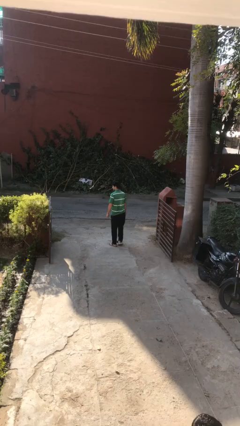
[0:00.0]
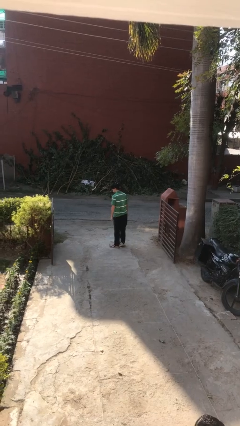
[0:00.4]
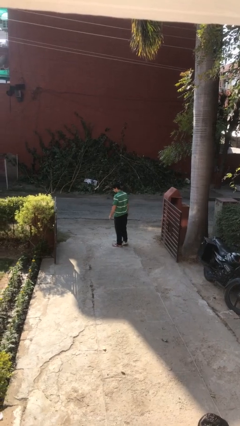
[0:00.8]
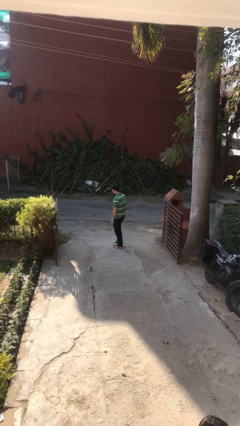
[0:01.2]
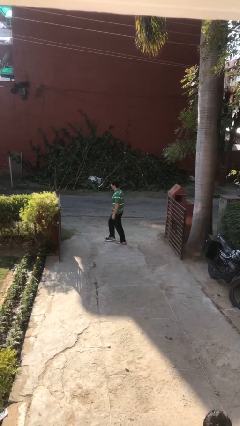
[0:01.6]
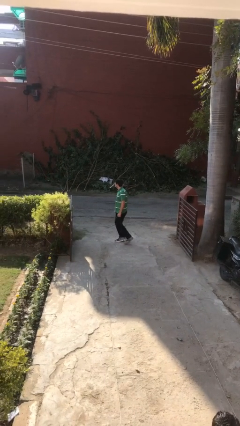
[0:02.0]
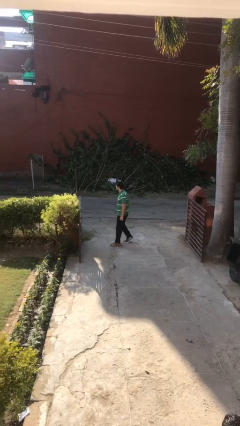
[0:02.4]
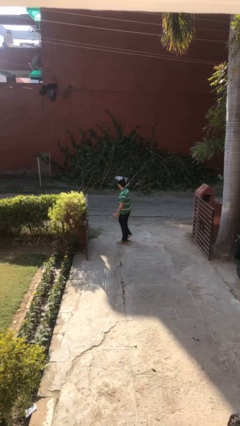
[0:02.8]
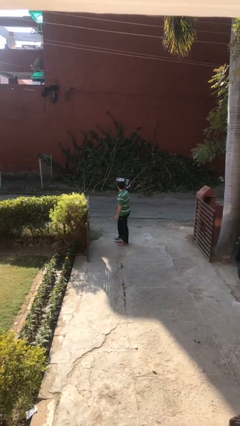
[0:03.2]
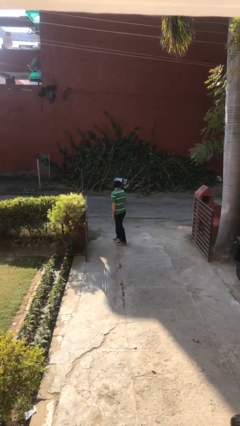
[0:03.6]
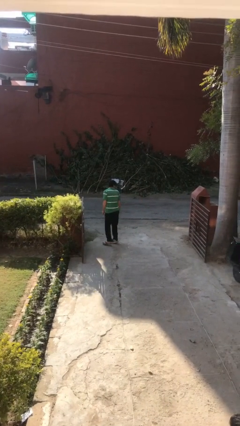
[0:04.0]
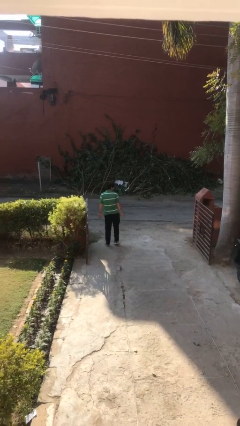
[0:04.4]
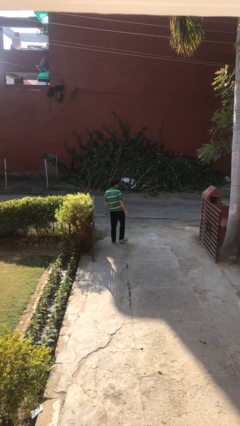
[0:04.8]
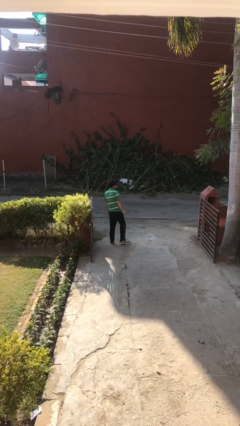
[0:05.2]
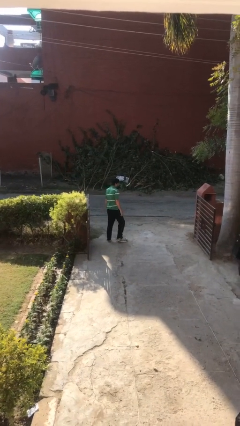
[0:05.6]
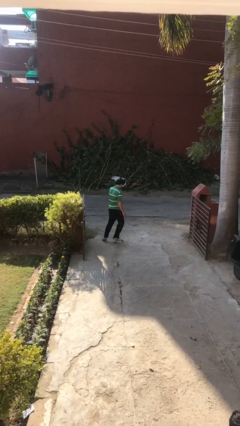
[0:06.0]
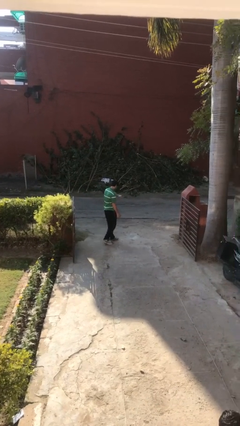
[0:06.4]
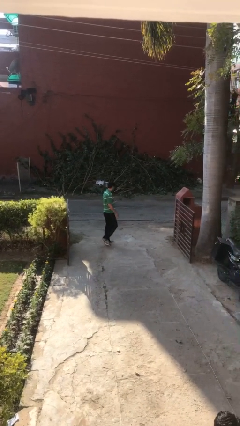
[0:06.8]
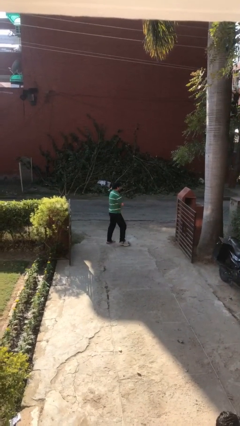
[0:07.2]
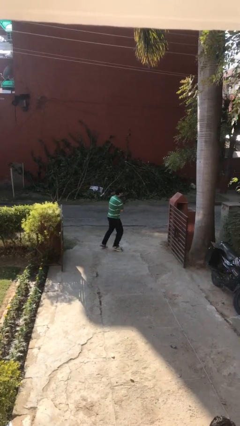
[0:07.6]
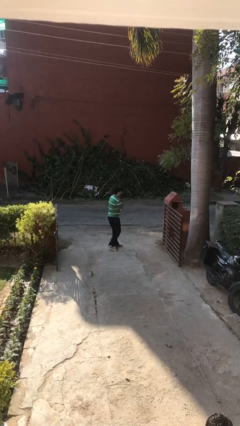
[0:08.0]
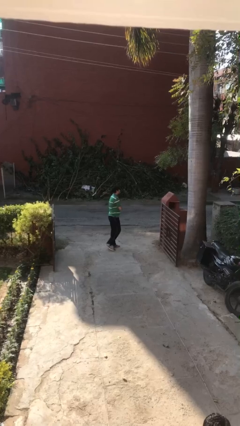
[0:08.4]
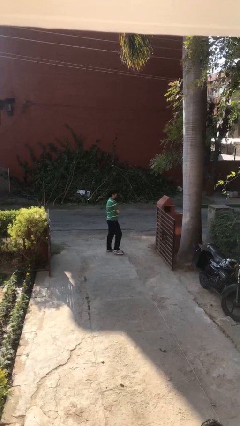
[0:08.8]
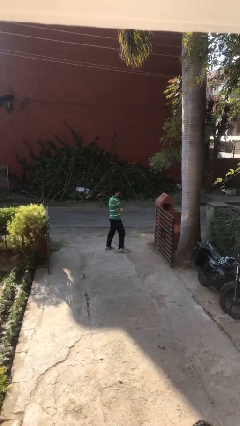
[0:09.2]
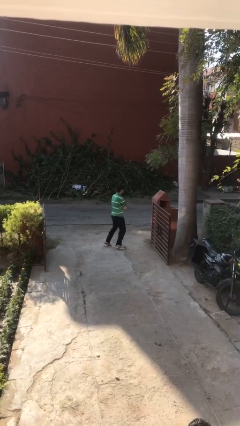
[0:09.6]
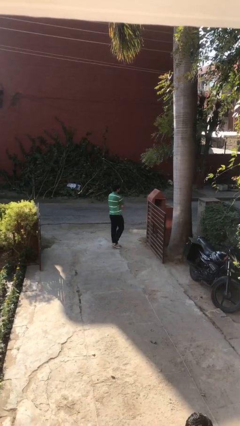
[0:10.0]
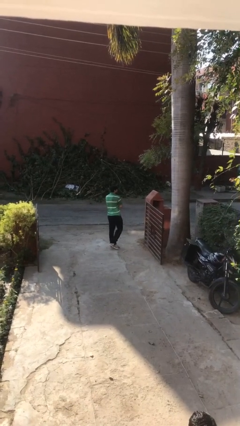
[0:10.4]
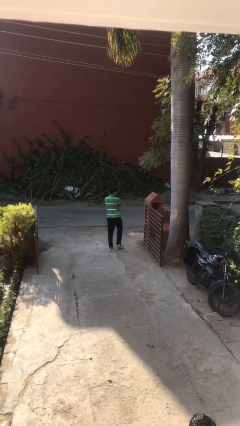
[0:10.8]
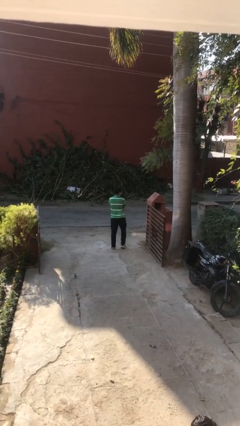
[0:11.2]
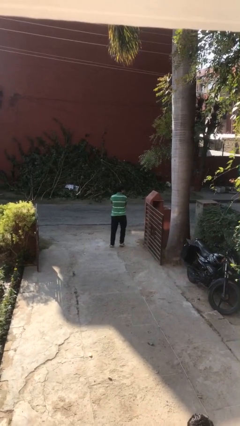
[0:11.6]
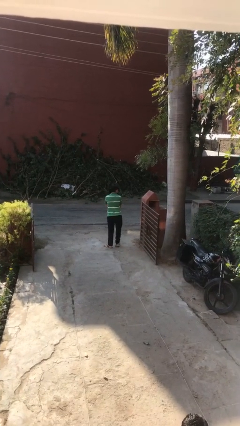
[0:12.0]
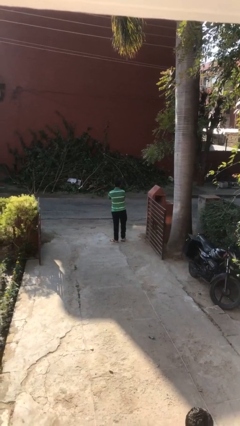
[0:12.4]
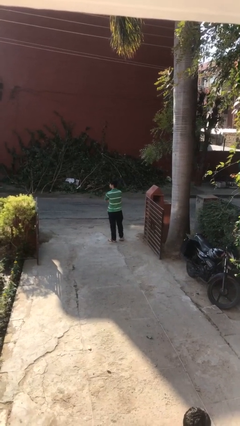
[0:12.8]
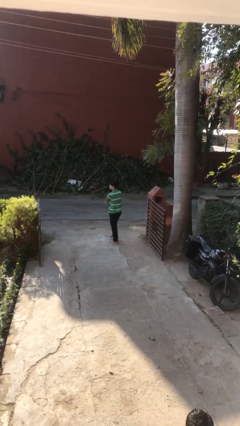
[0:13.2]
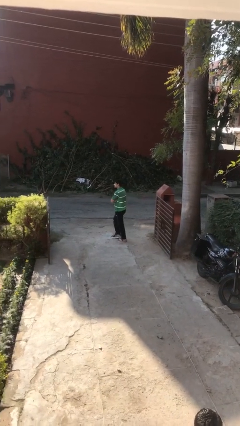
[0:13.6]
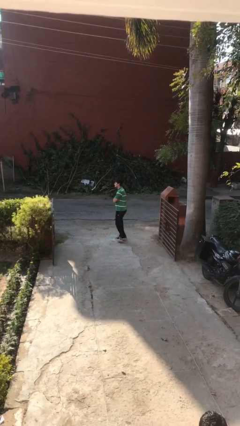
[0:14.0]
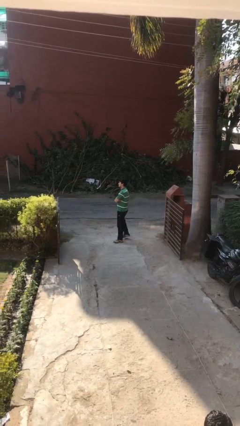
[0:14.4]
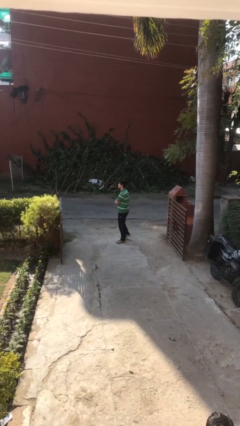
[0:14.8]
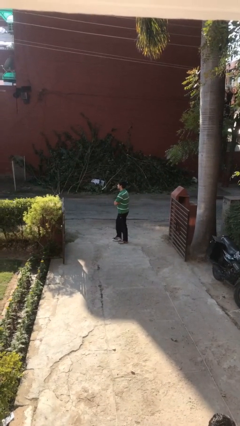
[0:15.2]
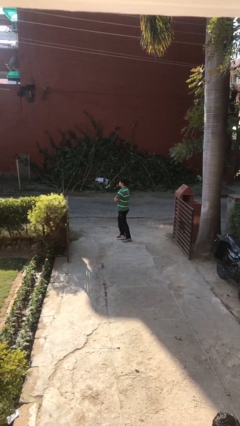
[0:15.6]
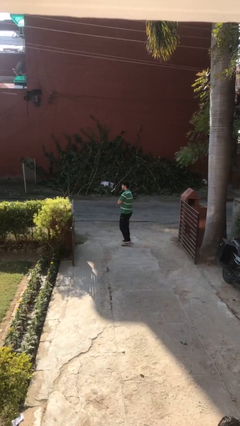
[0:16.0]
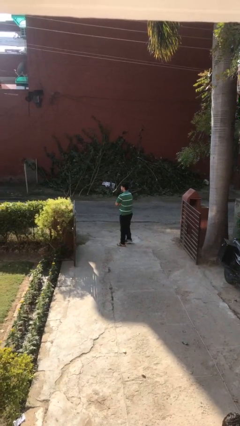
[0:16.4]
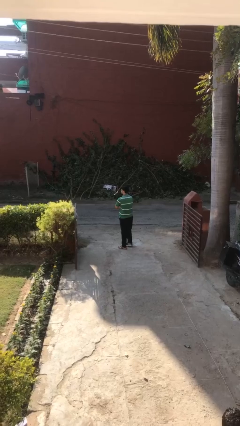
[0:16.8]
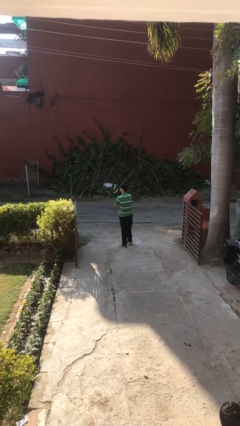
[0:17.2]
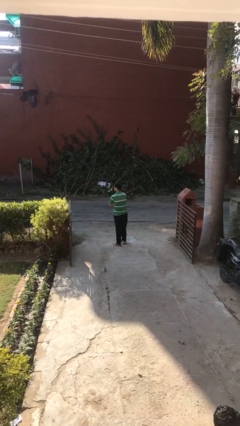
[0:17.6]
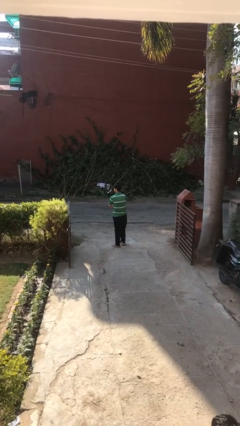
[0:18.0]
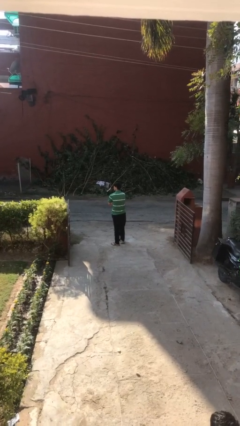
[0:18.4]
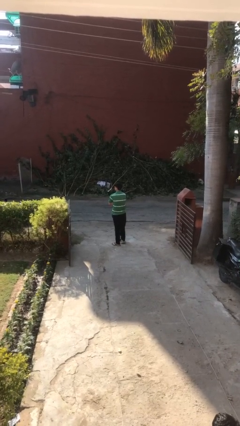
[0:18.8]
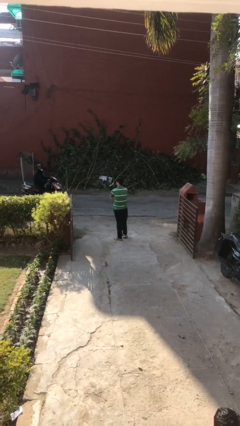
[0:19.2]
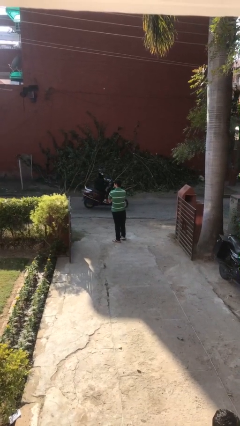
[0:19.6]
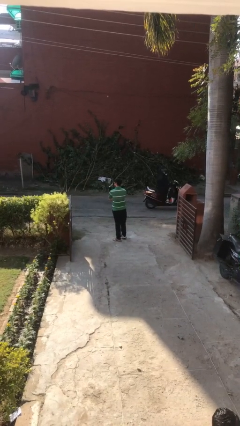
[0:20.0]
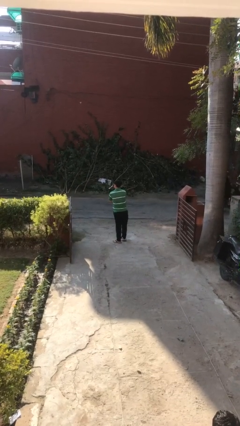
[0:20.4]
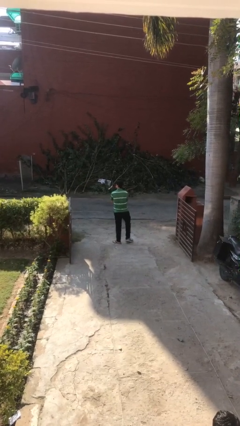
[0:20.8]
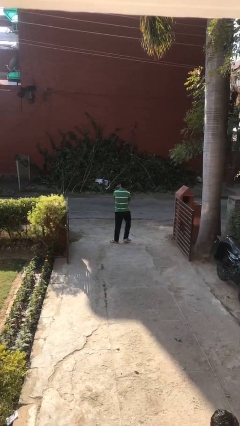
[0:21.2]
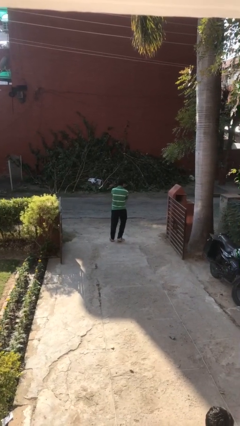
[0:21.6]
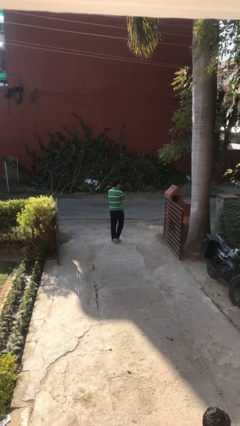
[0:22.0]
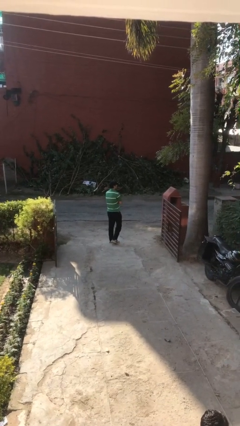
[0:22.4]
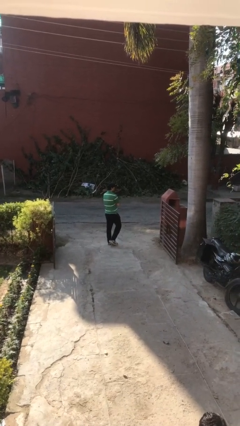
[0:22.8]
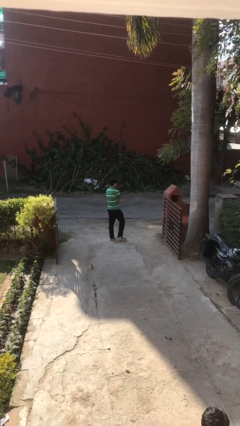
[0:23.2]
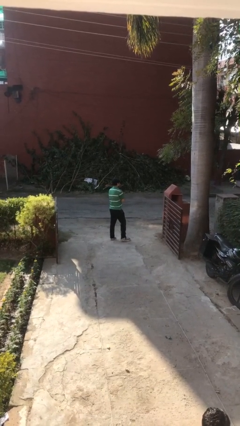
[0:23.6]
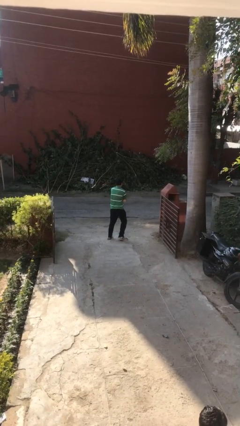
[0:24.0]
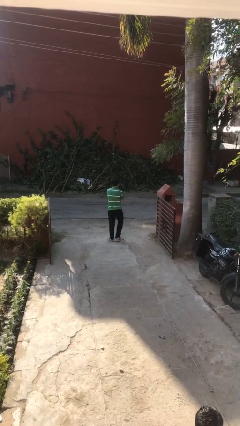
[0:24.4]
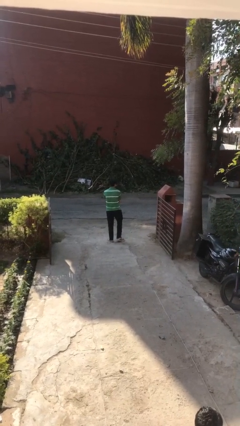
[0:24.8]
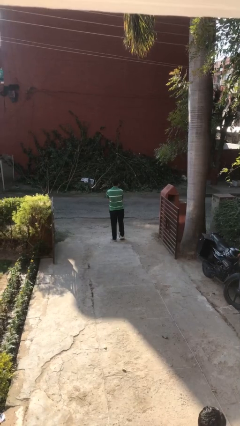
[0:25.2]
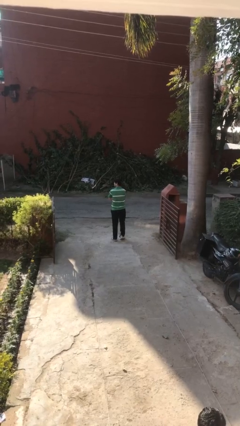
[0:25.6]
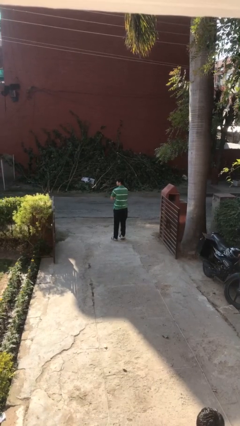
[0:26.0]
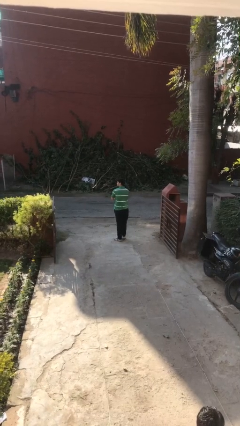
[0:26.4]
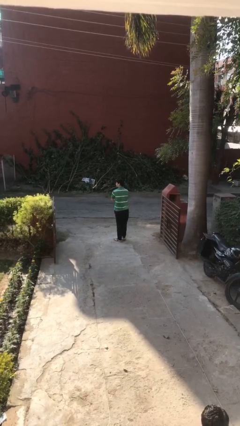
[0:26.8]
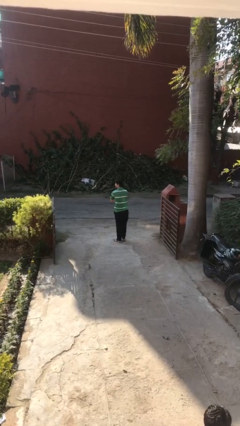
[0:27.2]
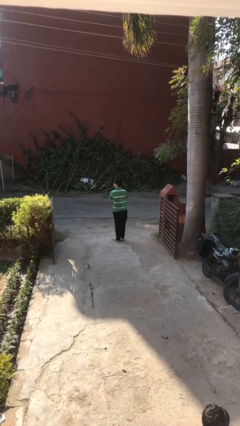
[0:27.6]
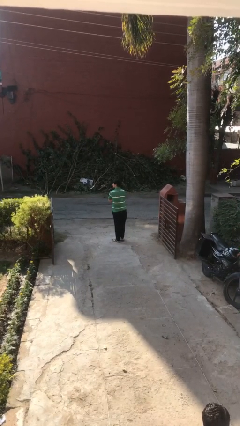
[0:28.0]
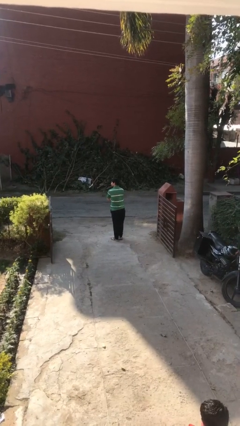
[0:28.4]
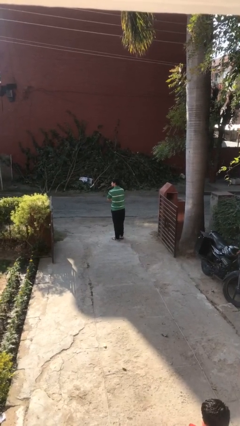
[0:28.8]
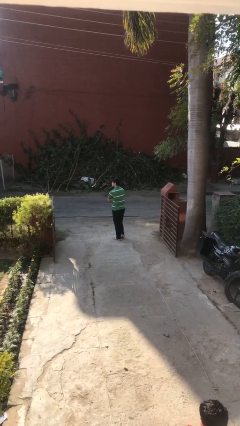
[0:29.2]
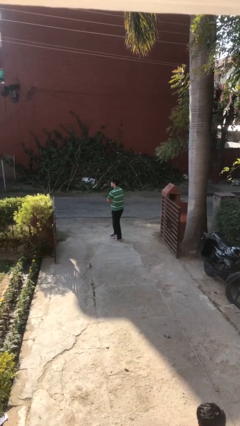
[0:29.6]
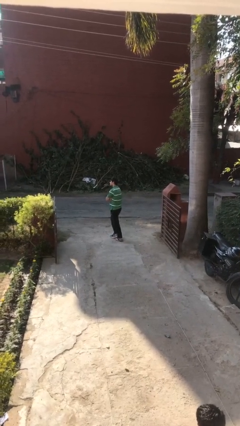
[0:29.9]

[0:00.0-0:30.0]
person walks

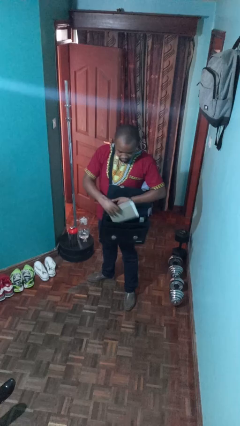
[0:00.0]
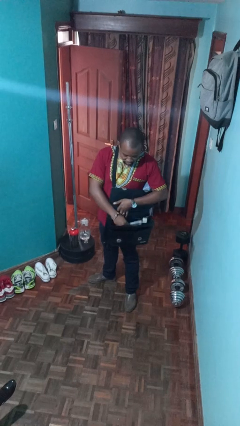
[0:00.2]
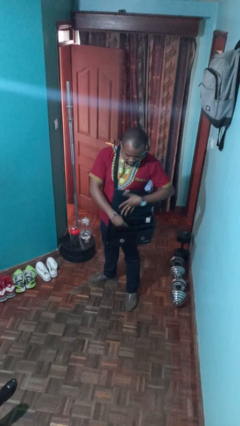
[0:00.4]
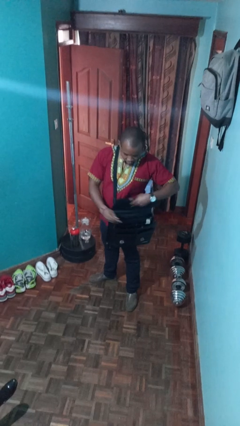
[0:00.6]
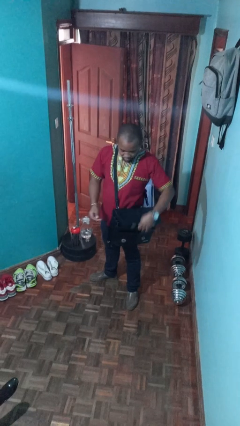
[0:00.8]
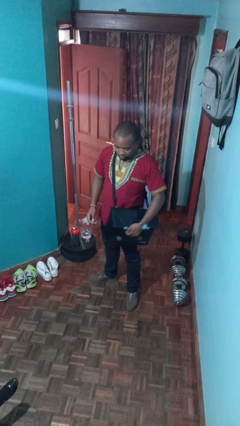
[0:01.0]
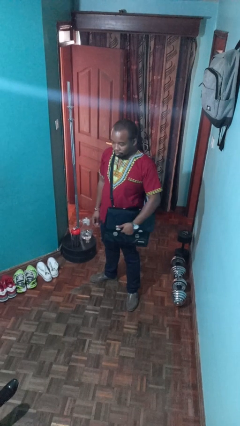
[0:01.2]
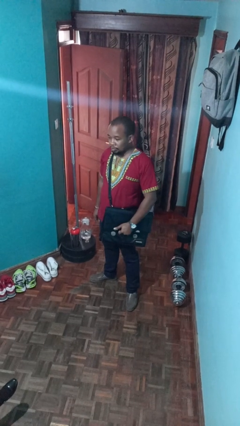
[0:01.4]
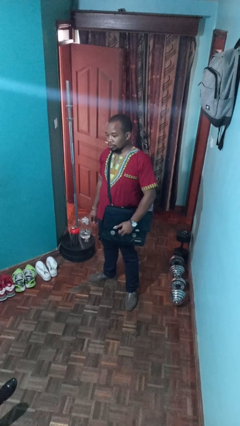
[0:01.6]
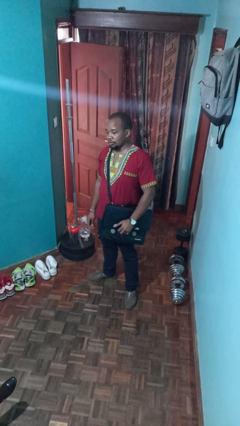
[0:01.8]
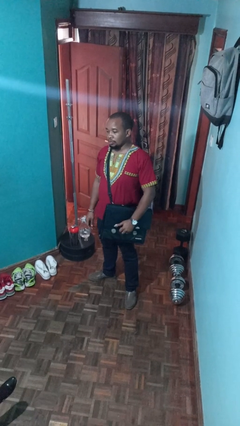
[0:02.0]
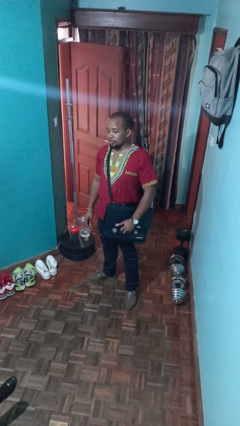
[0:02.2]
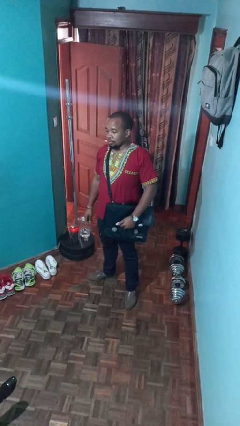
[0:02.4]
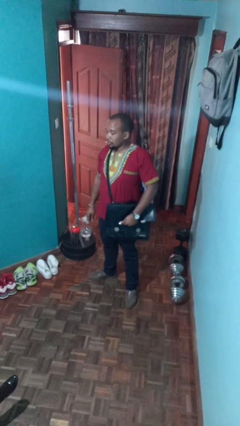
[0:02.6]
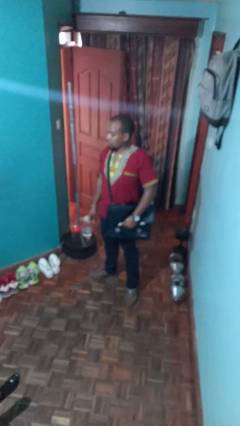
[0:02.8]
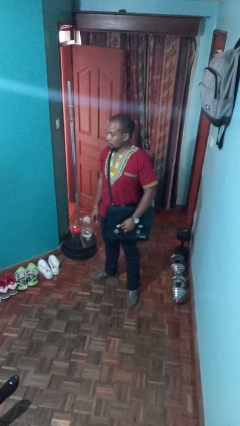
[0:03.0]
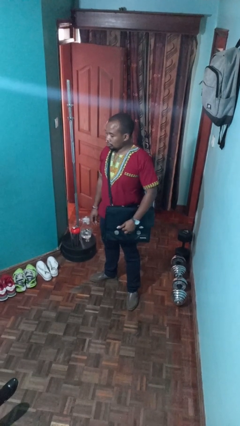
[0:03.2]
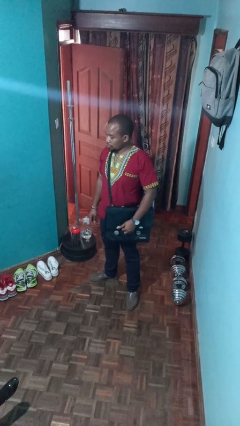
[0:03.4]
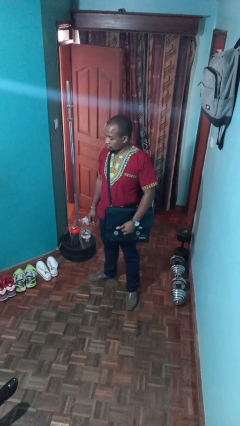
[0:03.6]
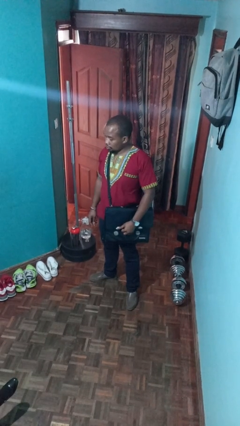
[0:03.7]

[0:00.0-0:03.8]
person puts object into purse
